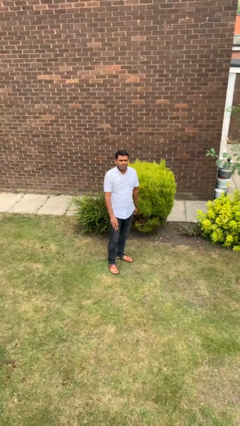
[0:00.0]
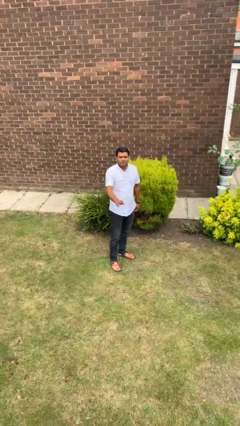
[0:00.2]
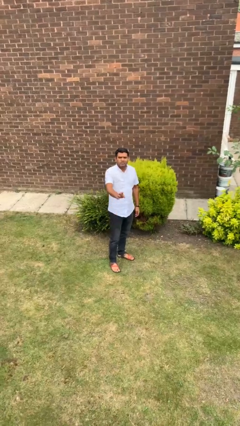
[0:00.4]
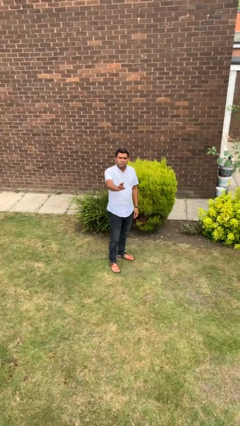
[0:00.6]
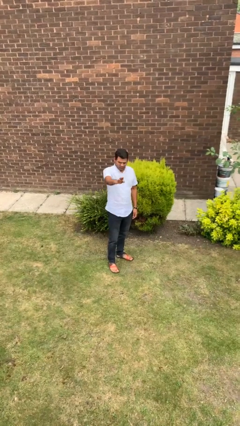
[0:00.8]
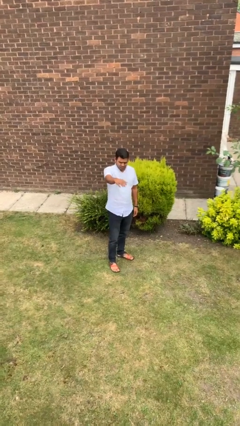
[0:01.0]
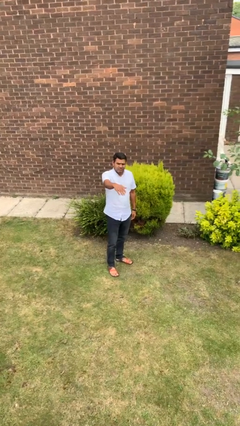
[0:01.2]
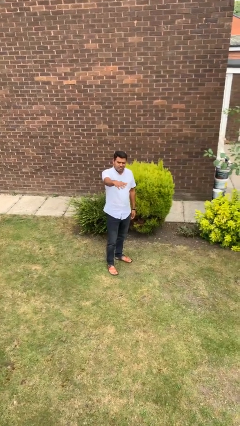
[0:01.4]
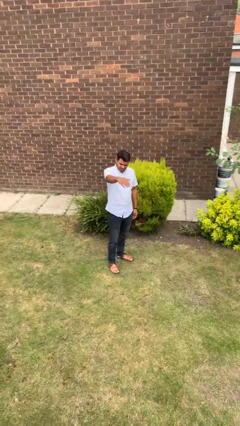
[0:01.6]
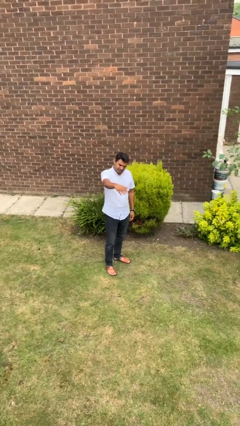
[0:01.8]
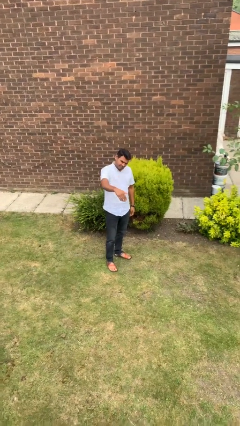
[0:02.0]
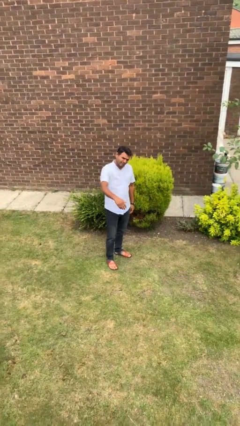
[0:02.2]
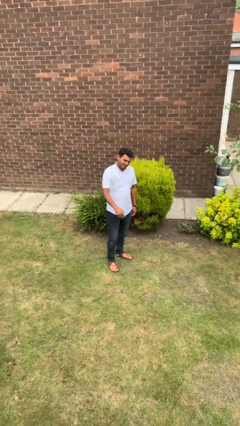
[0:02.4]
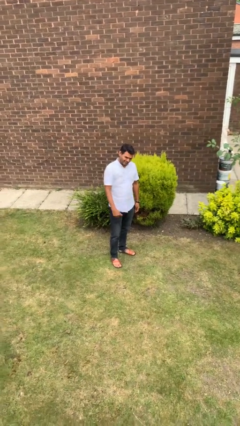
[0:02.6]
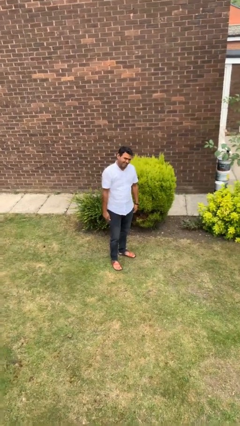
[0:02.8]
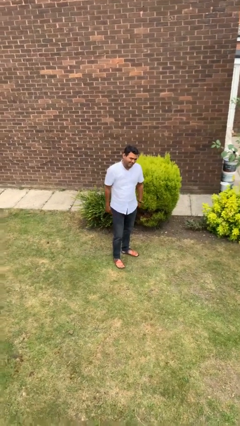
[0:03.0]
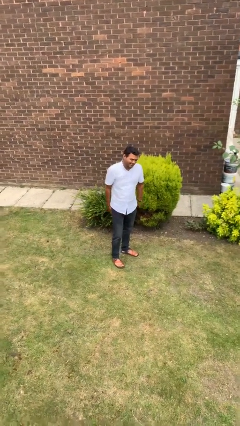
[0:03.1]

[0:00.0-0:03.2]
person gestures come here

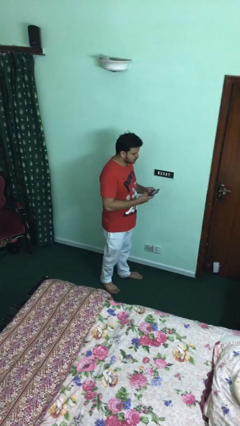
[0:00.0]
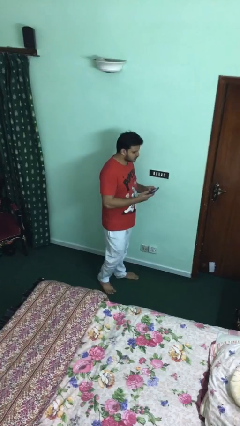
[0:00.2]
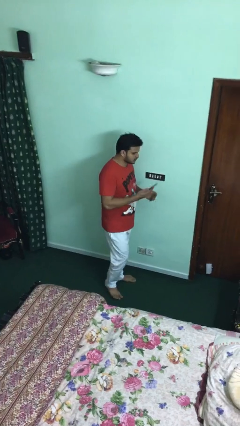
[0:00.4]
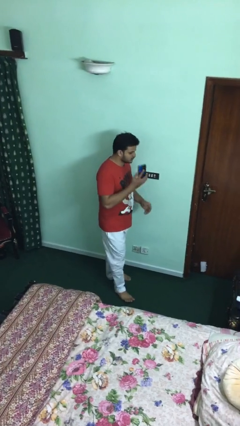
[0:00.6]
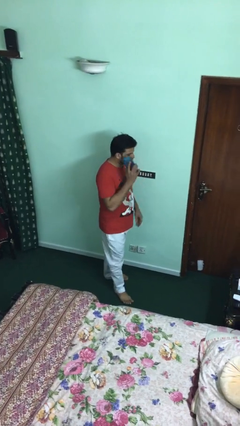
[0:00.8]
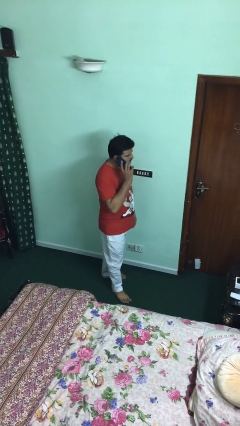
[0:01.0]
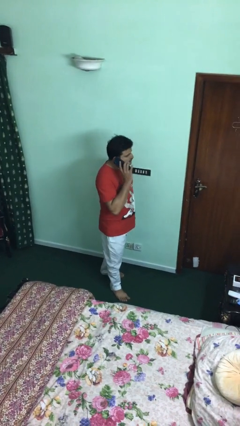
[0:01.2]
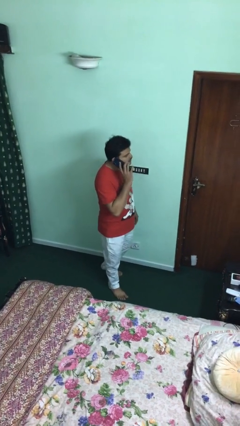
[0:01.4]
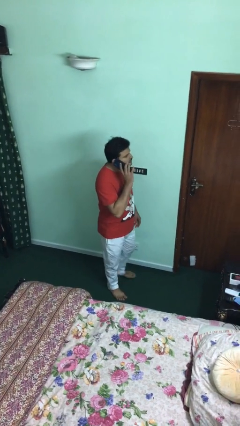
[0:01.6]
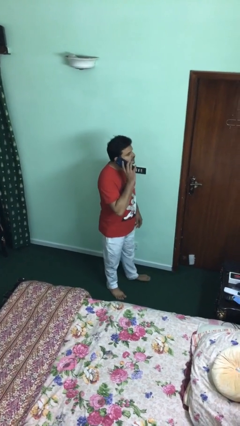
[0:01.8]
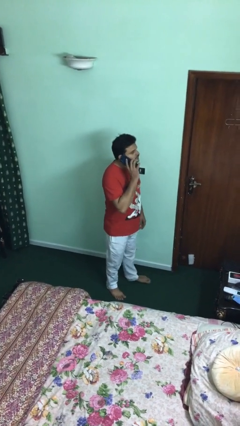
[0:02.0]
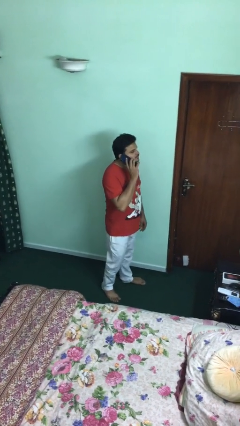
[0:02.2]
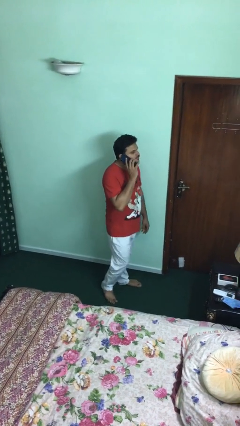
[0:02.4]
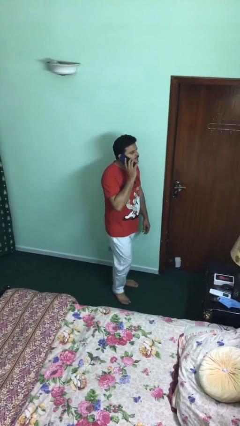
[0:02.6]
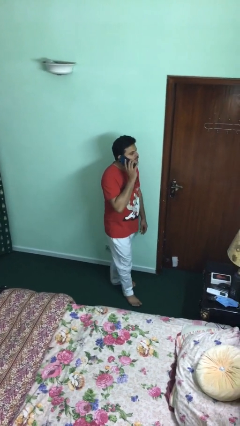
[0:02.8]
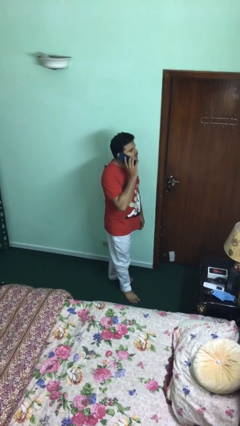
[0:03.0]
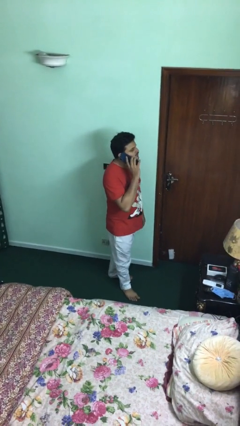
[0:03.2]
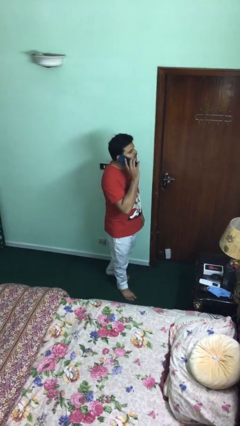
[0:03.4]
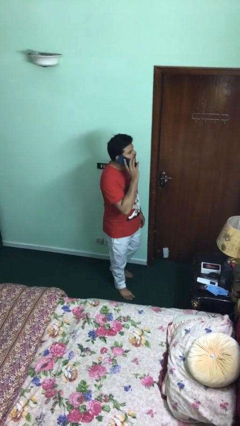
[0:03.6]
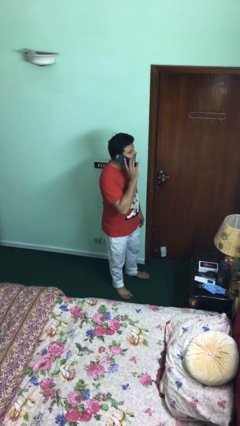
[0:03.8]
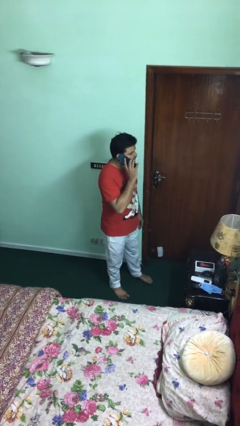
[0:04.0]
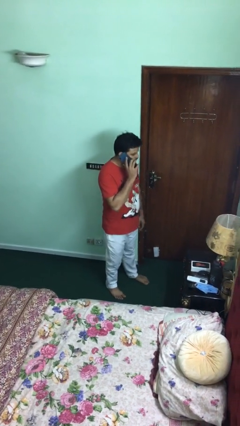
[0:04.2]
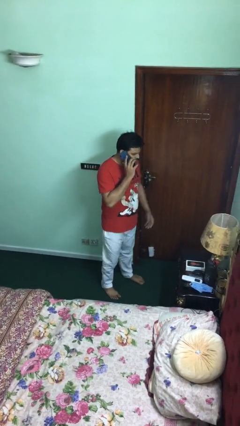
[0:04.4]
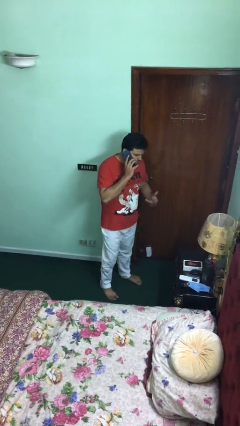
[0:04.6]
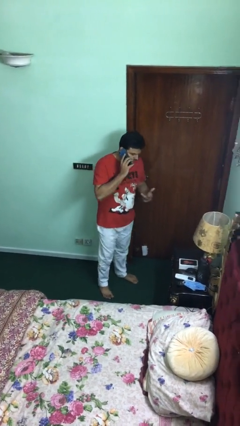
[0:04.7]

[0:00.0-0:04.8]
person talks on phone

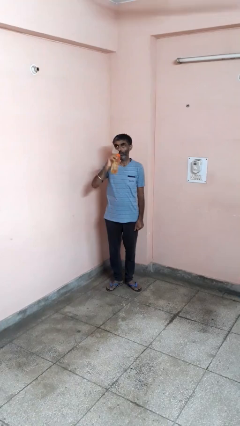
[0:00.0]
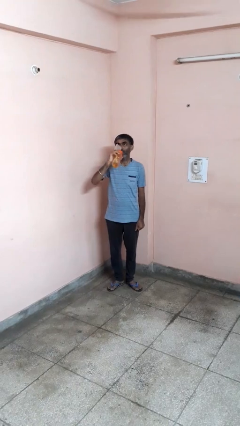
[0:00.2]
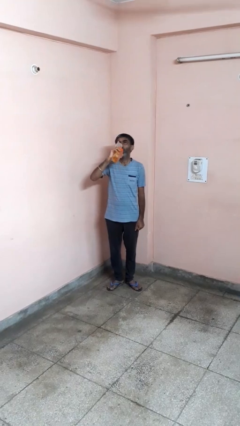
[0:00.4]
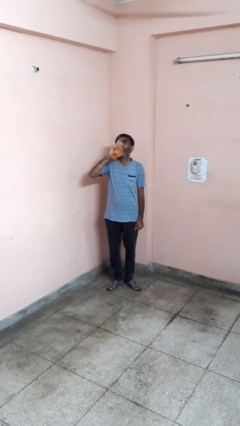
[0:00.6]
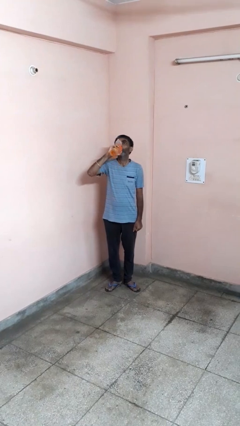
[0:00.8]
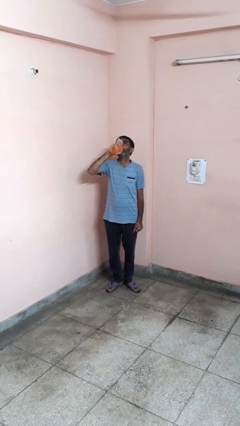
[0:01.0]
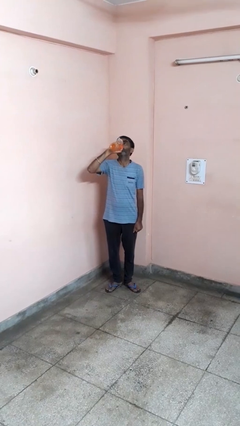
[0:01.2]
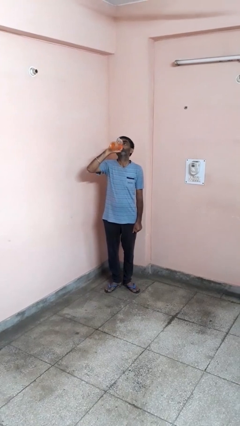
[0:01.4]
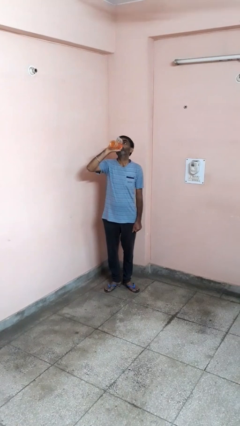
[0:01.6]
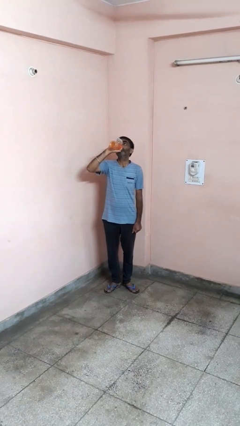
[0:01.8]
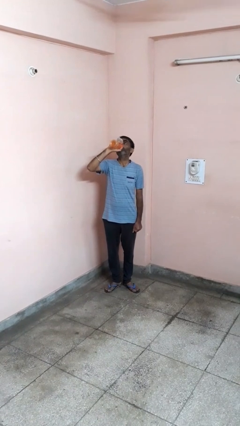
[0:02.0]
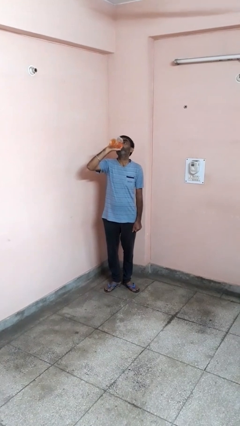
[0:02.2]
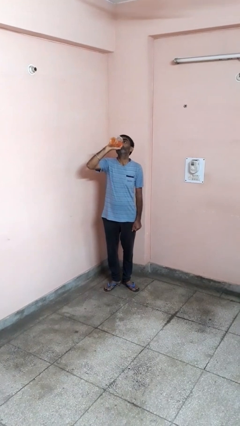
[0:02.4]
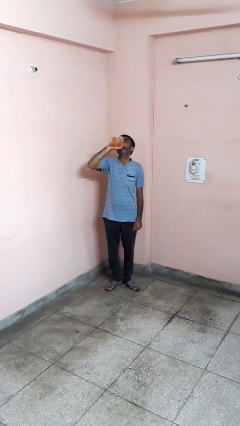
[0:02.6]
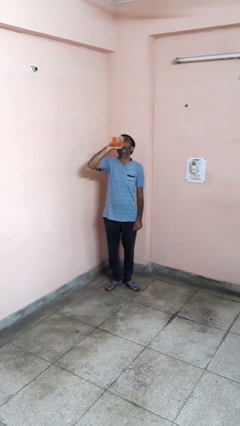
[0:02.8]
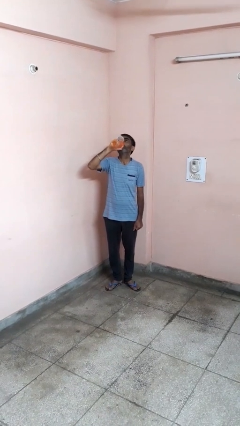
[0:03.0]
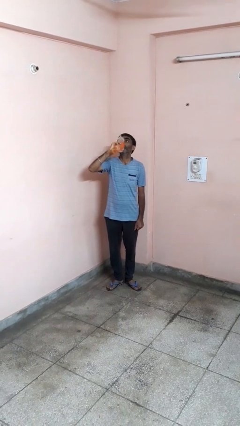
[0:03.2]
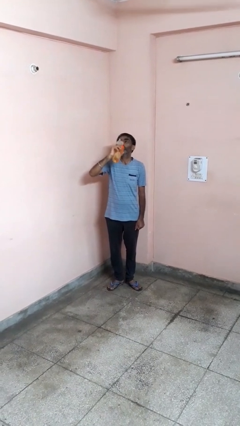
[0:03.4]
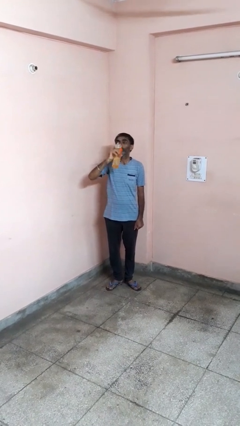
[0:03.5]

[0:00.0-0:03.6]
person drinks from bottle

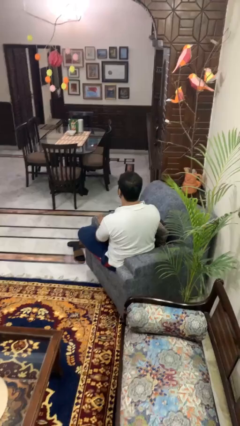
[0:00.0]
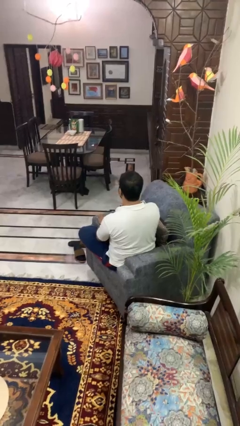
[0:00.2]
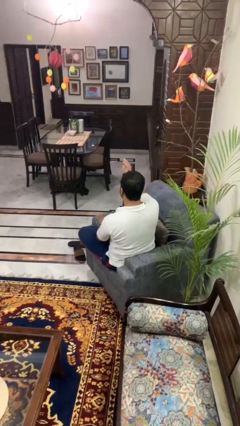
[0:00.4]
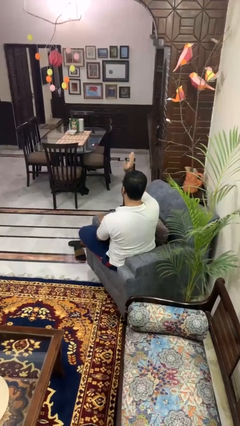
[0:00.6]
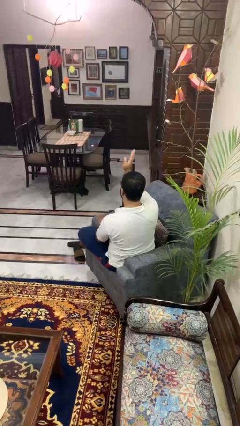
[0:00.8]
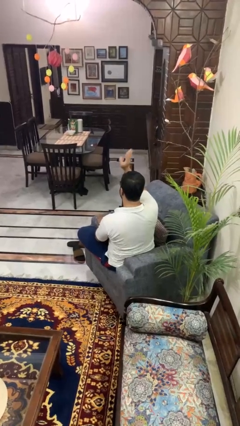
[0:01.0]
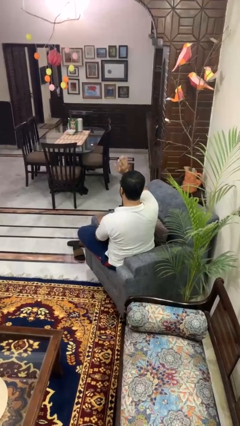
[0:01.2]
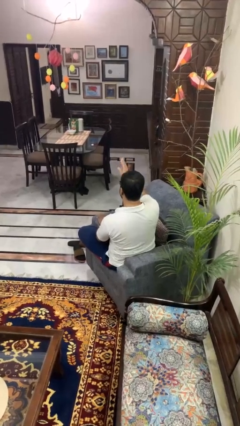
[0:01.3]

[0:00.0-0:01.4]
person waves at person

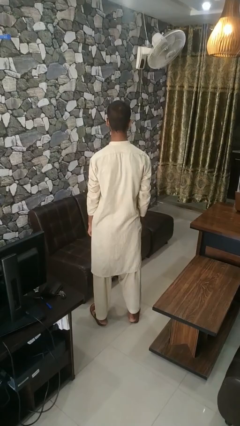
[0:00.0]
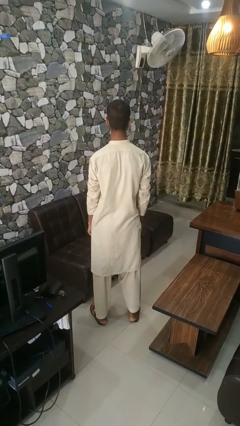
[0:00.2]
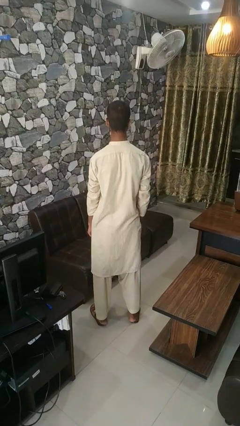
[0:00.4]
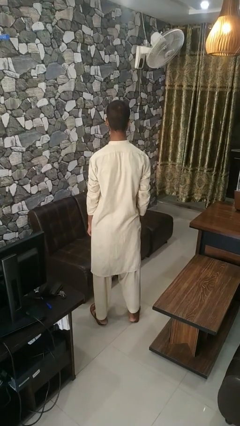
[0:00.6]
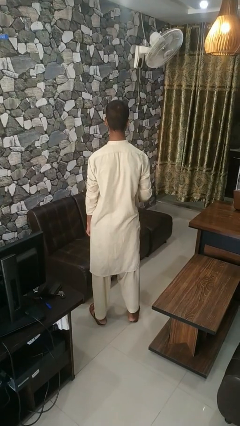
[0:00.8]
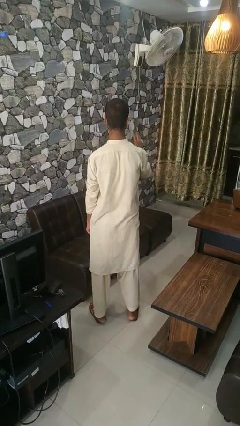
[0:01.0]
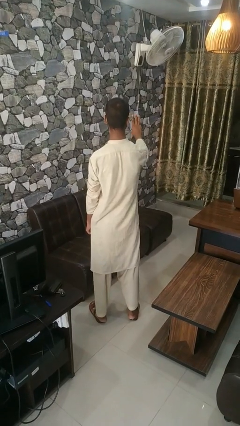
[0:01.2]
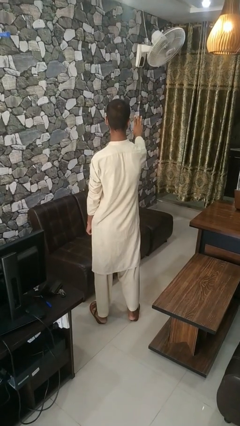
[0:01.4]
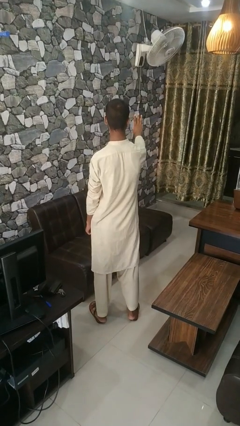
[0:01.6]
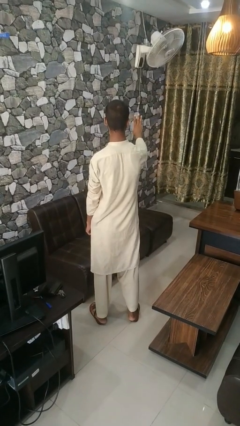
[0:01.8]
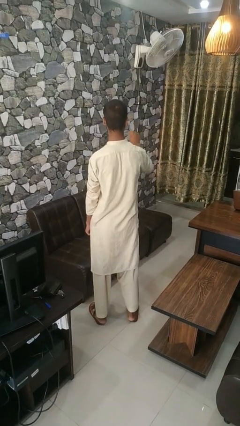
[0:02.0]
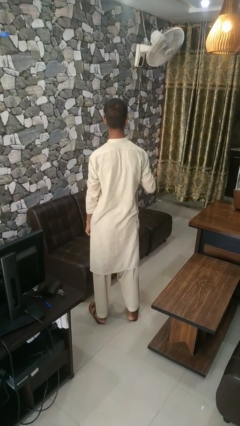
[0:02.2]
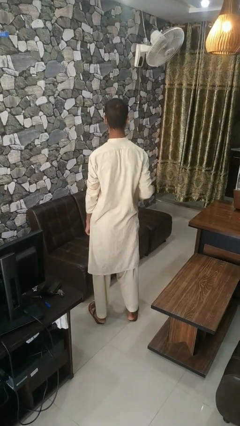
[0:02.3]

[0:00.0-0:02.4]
person gestures number three

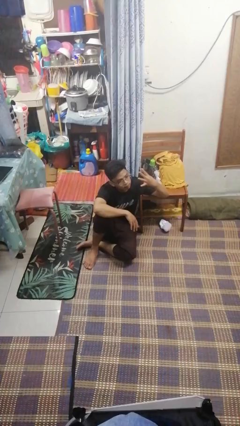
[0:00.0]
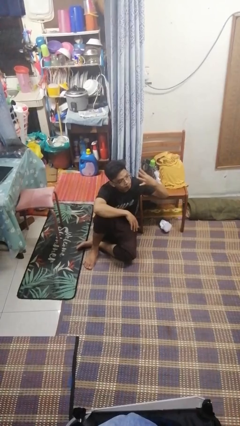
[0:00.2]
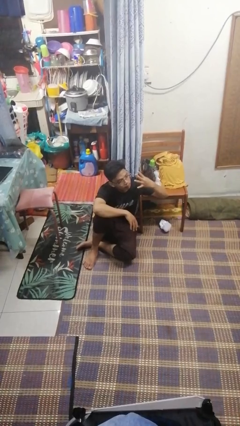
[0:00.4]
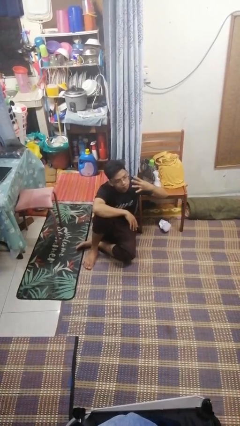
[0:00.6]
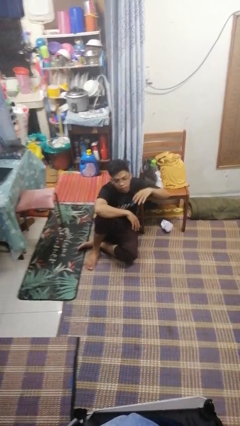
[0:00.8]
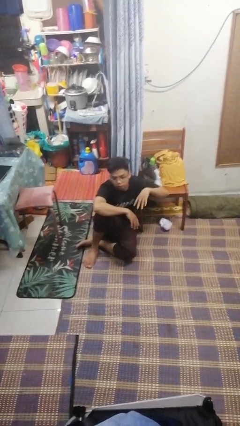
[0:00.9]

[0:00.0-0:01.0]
person gestures number four

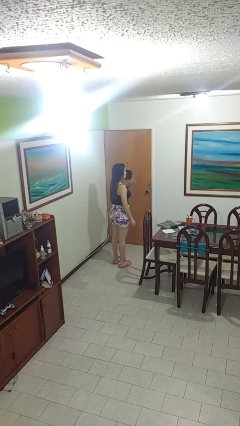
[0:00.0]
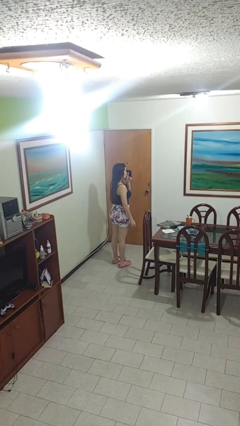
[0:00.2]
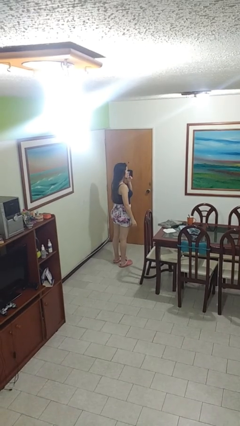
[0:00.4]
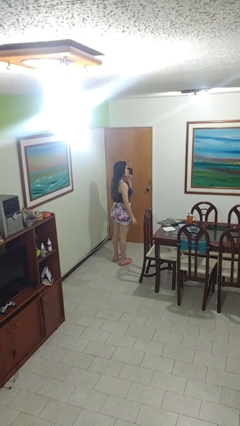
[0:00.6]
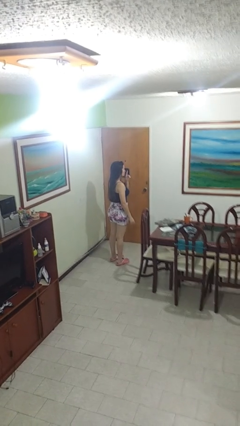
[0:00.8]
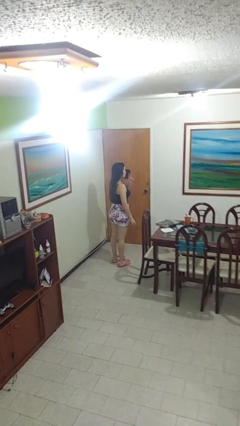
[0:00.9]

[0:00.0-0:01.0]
person gestures be quiet
